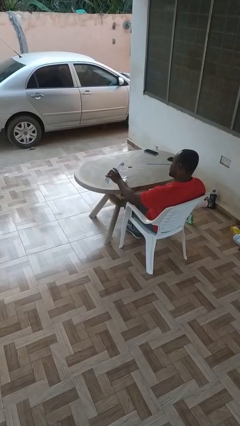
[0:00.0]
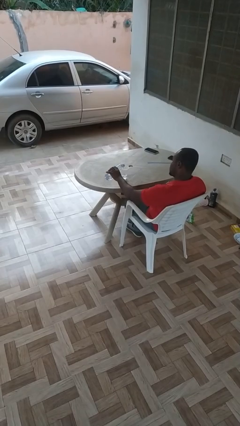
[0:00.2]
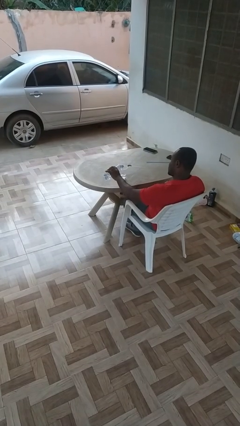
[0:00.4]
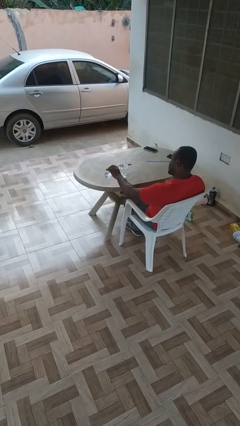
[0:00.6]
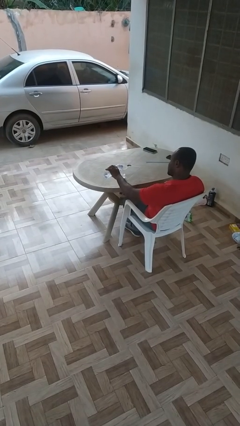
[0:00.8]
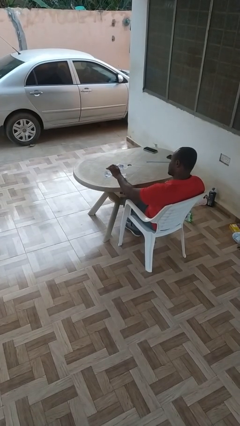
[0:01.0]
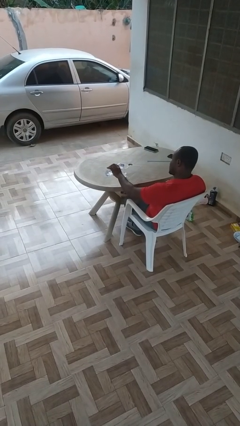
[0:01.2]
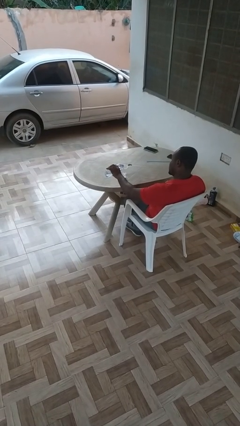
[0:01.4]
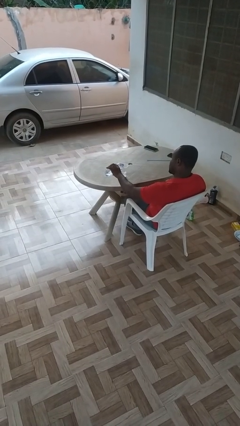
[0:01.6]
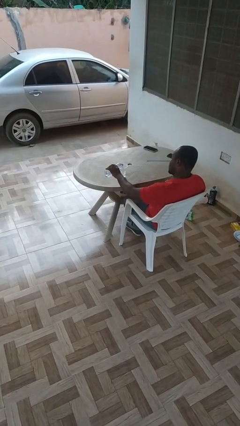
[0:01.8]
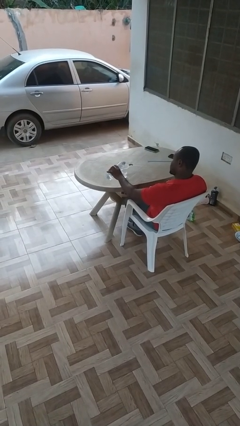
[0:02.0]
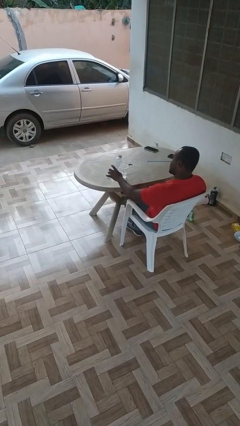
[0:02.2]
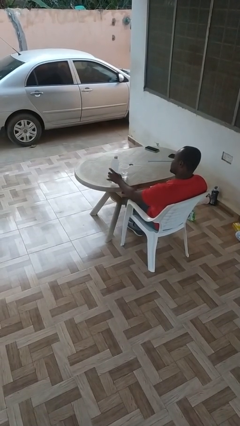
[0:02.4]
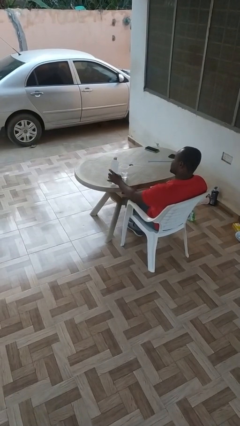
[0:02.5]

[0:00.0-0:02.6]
person pours liquid into cup

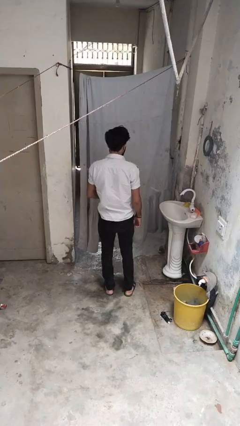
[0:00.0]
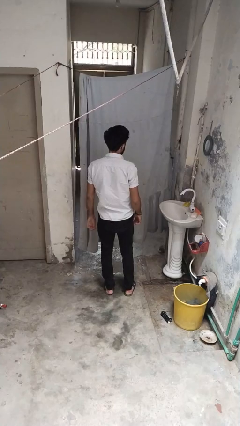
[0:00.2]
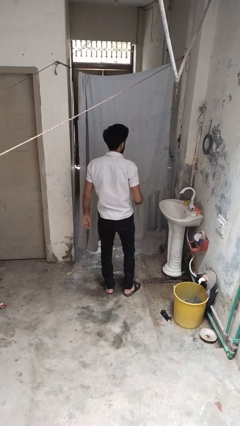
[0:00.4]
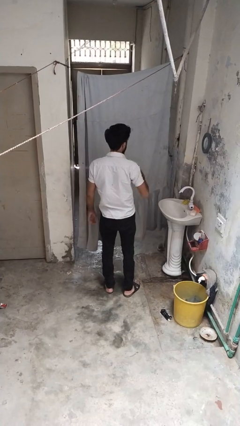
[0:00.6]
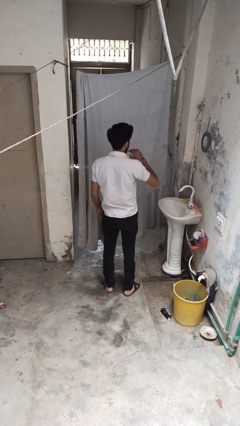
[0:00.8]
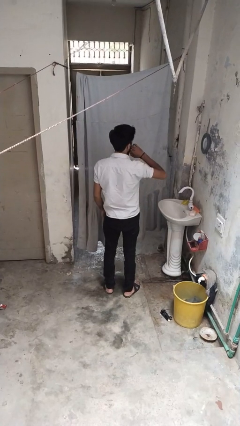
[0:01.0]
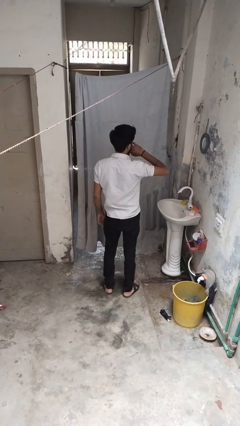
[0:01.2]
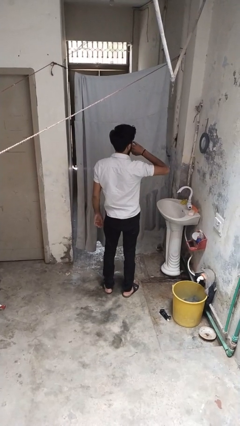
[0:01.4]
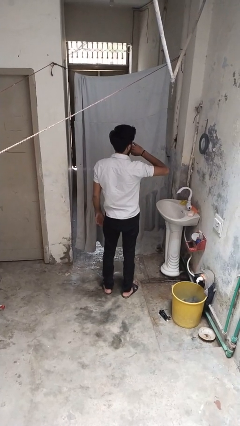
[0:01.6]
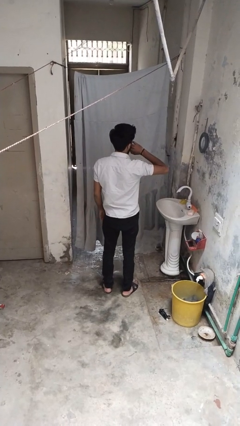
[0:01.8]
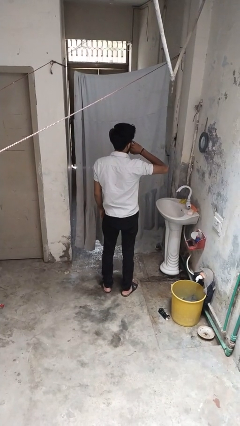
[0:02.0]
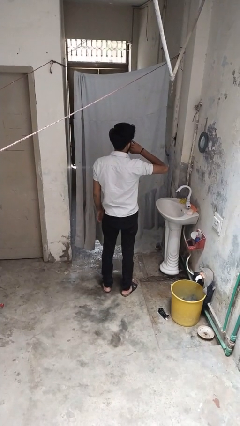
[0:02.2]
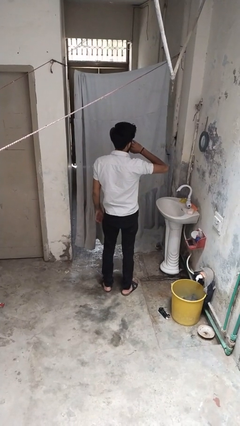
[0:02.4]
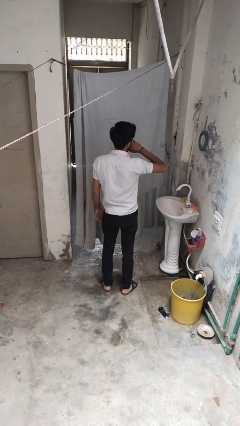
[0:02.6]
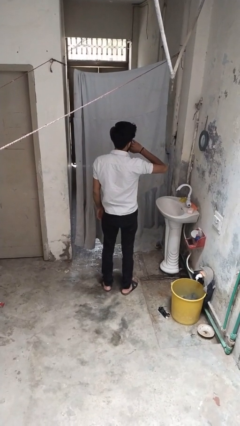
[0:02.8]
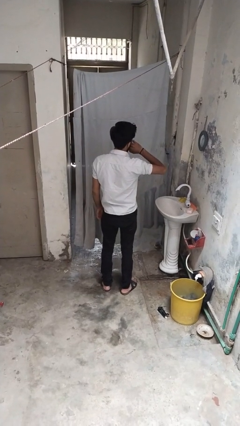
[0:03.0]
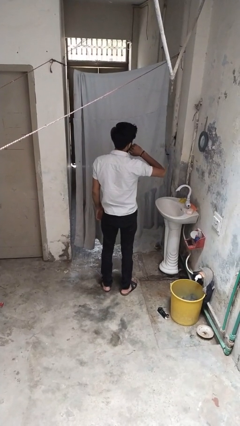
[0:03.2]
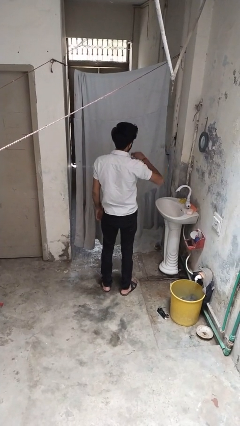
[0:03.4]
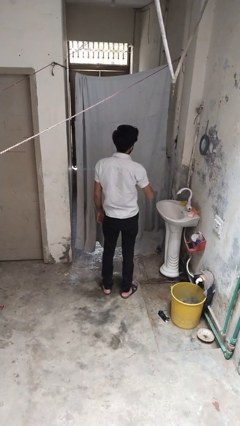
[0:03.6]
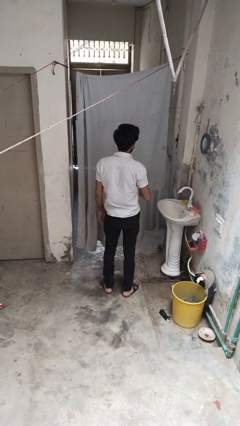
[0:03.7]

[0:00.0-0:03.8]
person yawns

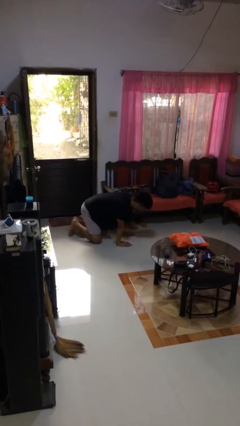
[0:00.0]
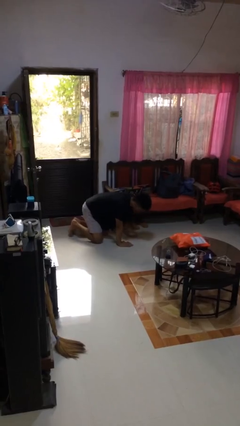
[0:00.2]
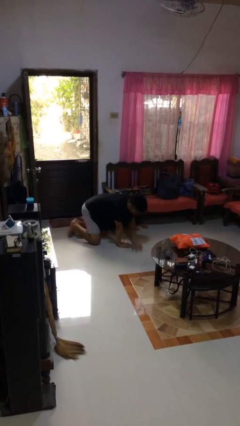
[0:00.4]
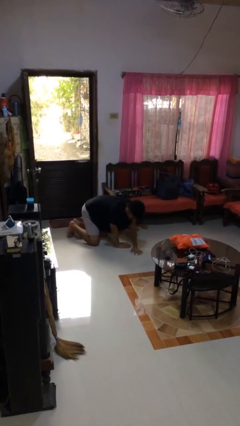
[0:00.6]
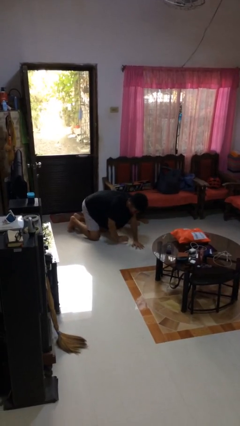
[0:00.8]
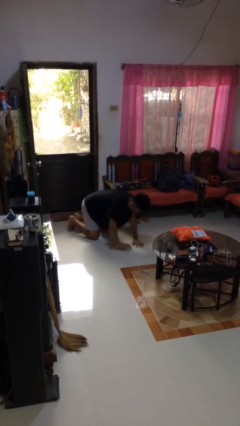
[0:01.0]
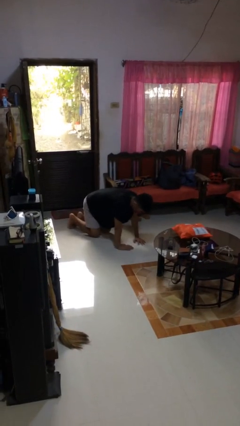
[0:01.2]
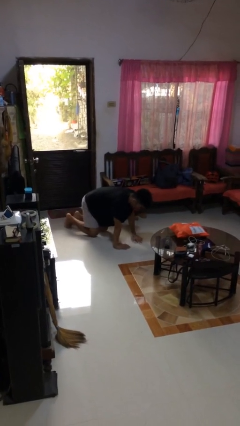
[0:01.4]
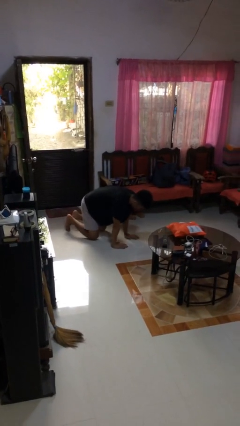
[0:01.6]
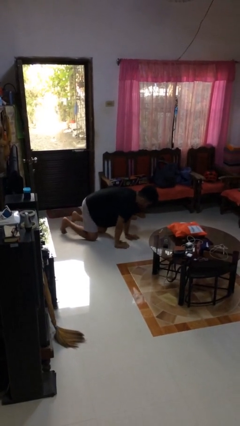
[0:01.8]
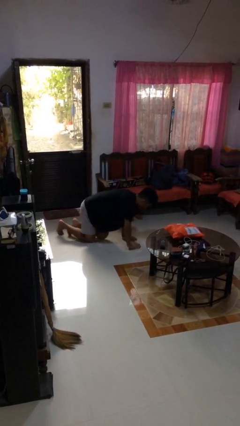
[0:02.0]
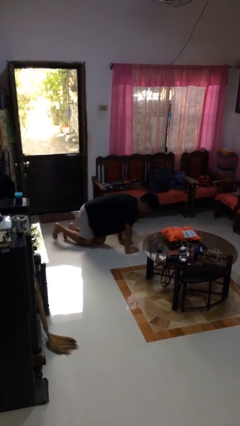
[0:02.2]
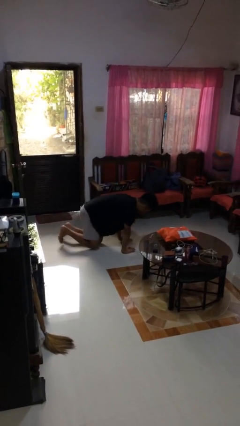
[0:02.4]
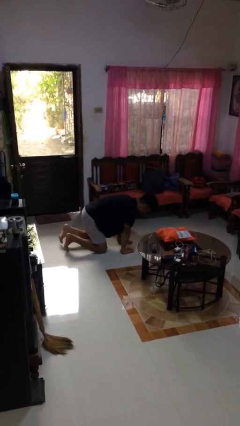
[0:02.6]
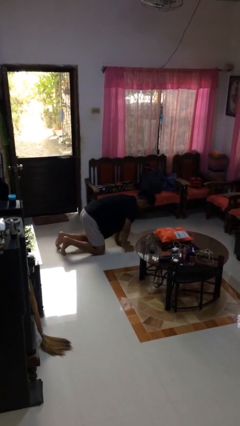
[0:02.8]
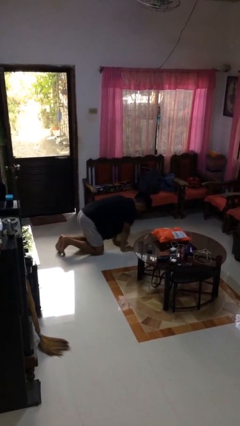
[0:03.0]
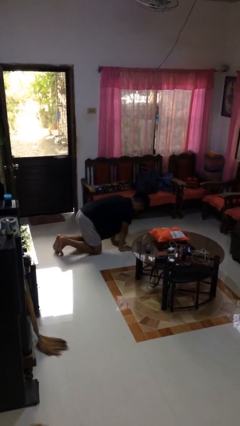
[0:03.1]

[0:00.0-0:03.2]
person crawls

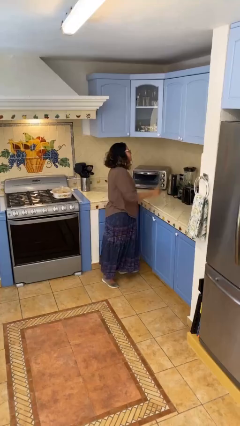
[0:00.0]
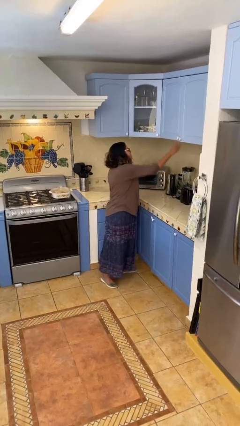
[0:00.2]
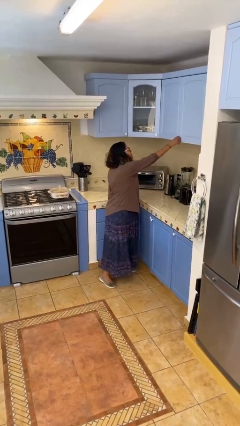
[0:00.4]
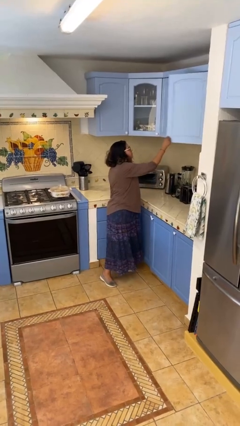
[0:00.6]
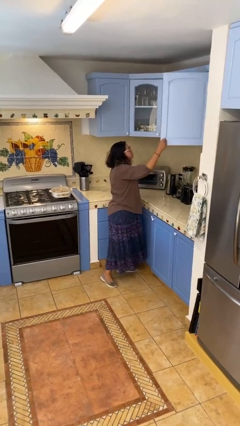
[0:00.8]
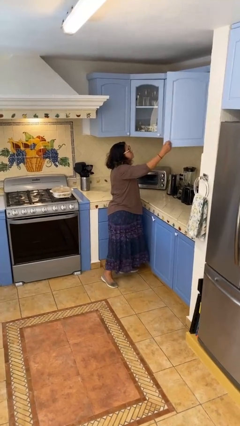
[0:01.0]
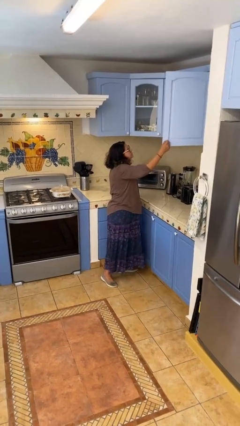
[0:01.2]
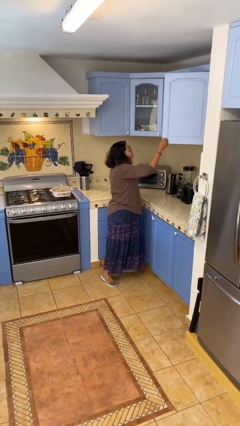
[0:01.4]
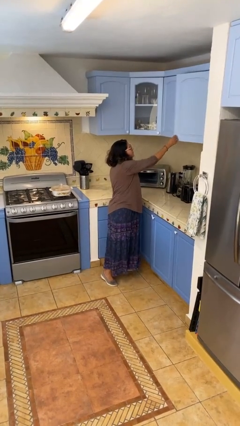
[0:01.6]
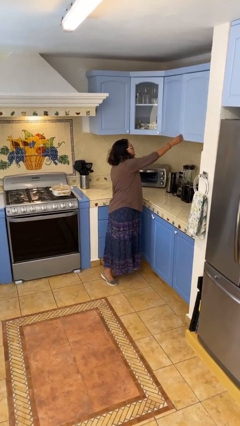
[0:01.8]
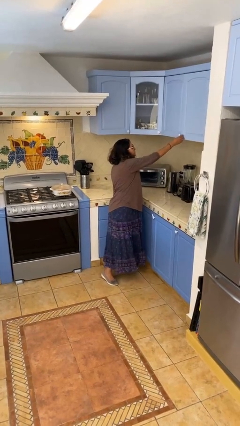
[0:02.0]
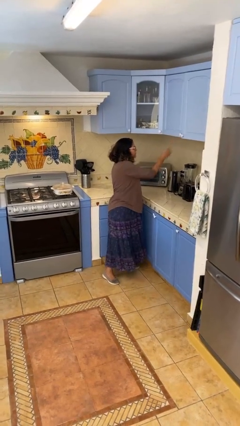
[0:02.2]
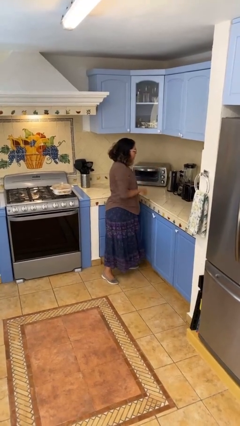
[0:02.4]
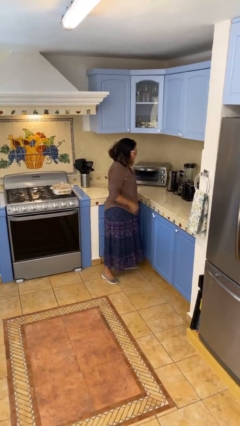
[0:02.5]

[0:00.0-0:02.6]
person closes cabinet

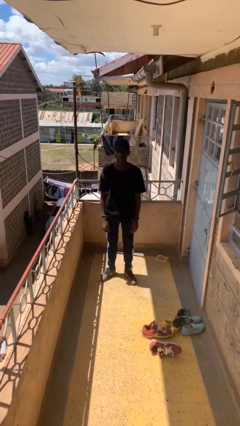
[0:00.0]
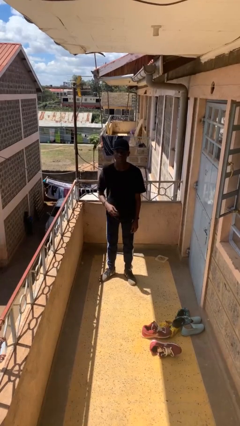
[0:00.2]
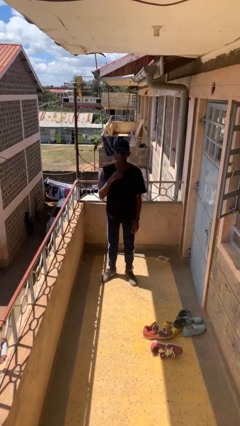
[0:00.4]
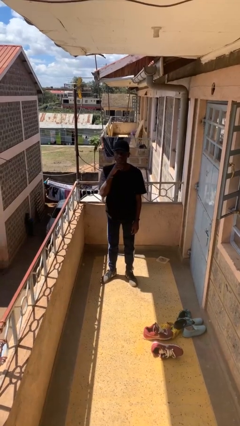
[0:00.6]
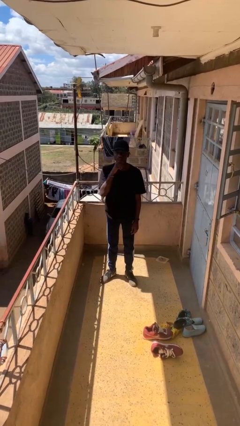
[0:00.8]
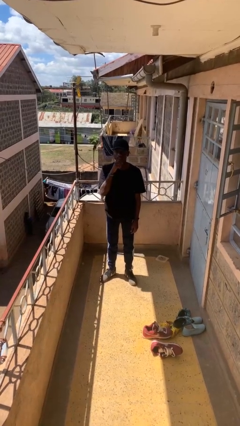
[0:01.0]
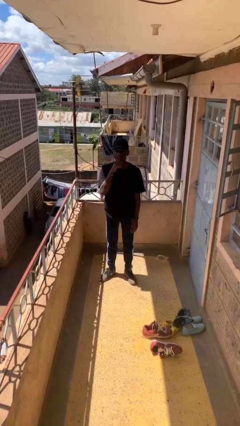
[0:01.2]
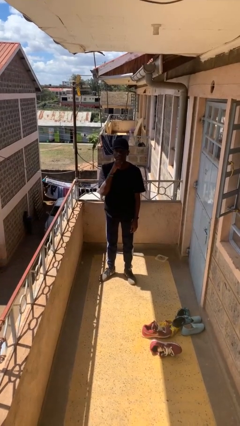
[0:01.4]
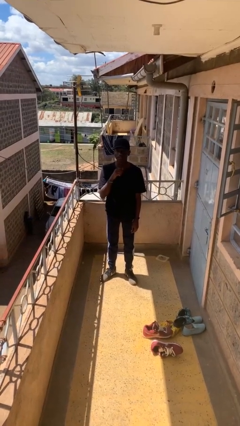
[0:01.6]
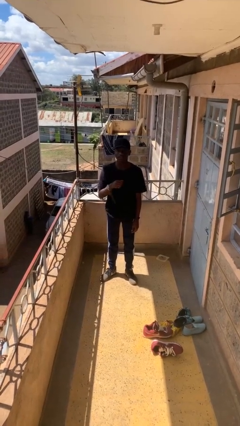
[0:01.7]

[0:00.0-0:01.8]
person strokes chin

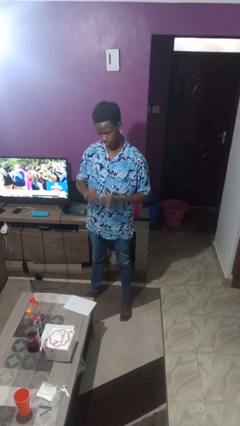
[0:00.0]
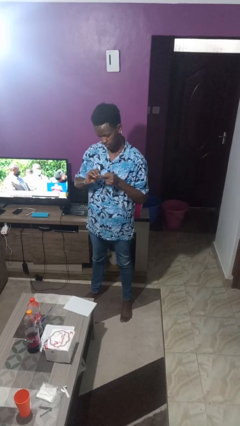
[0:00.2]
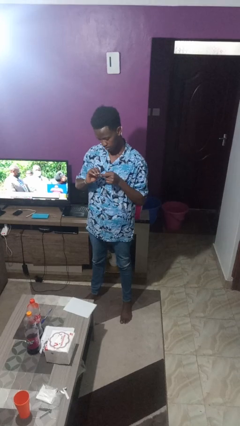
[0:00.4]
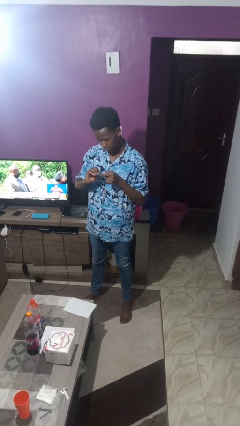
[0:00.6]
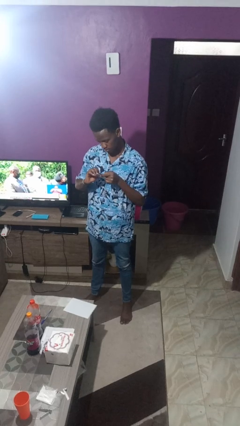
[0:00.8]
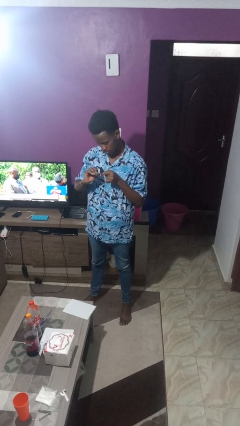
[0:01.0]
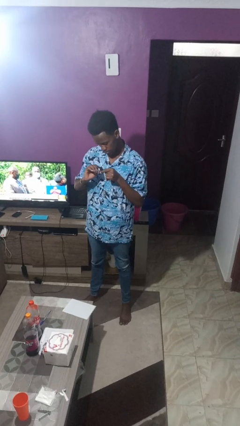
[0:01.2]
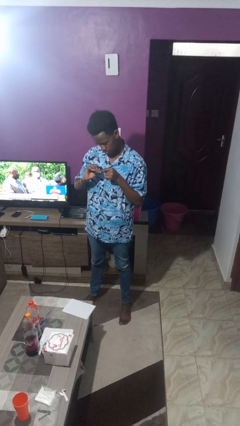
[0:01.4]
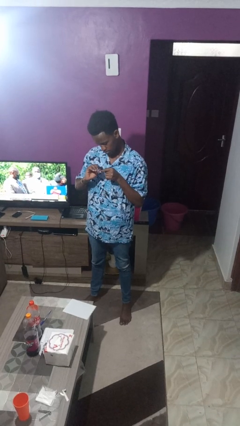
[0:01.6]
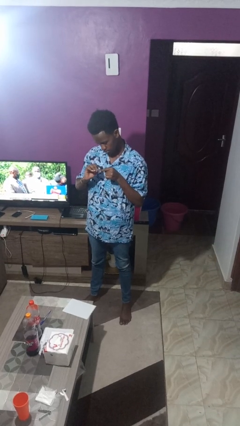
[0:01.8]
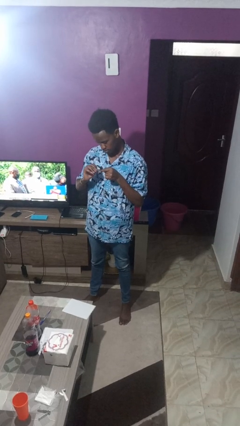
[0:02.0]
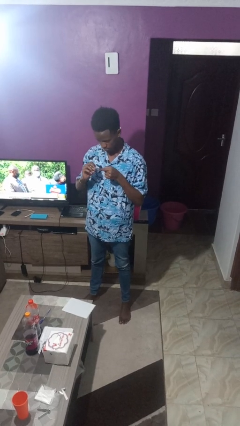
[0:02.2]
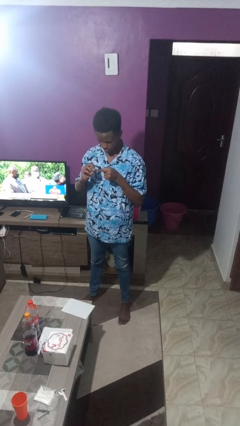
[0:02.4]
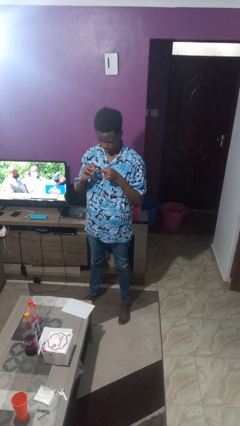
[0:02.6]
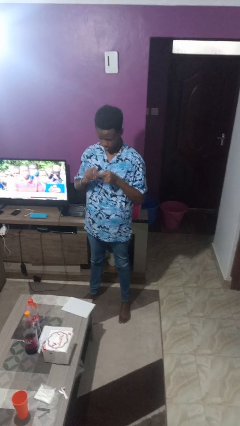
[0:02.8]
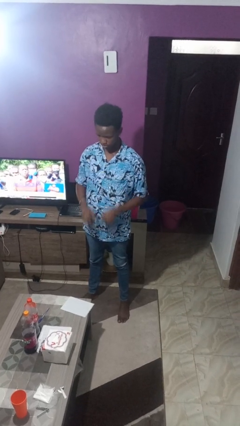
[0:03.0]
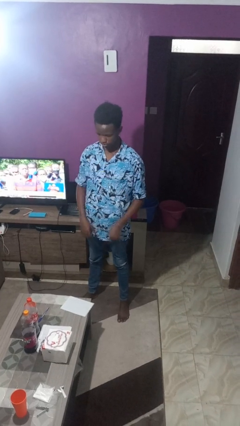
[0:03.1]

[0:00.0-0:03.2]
person files fingernails
